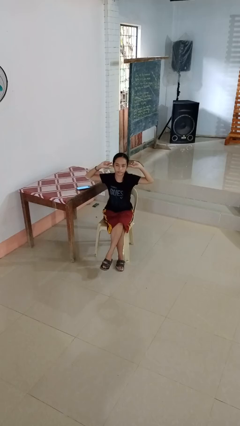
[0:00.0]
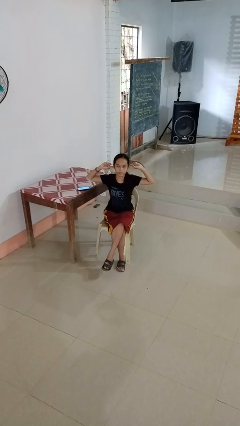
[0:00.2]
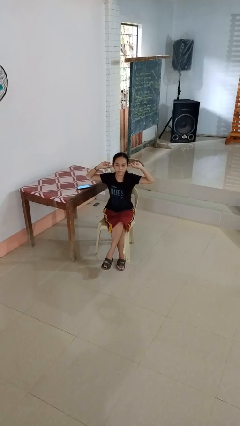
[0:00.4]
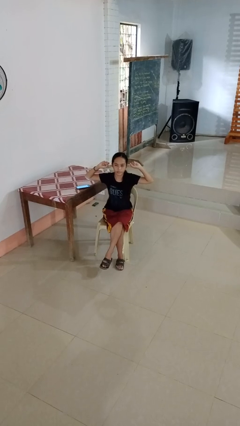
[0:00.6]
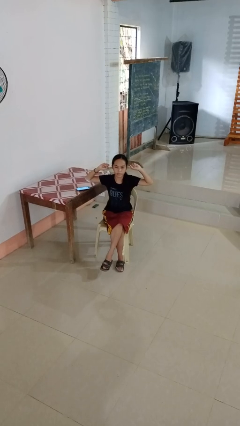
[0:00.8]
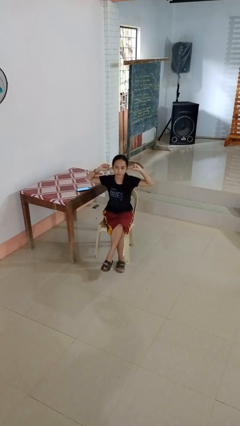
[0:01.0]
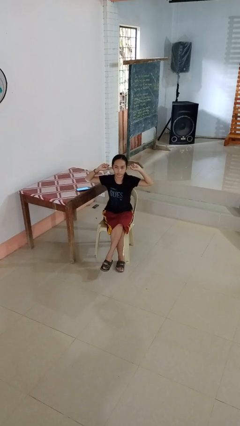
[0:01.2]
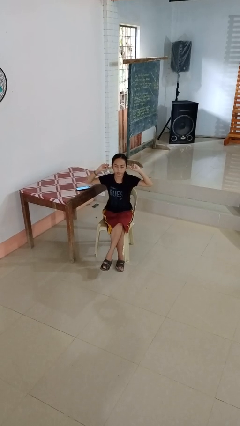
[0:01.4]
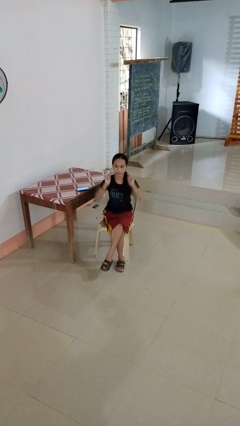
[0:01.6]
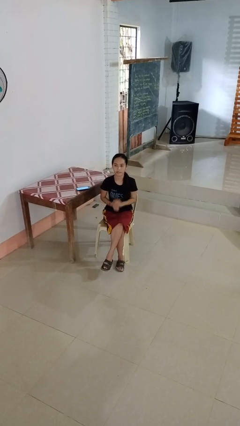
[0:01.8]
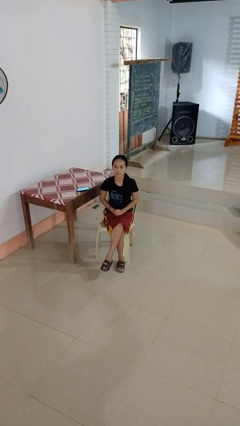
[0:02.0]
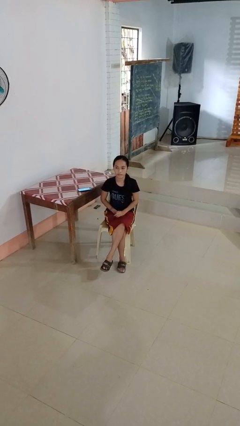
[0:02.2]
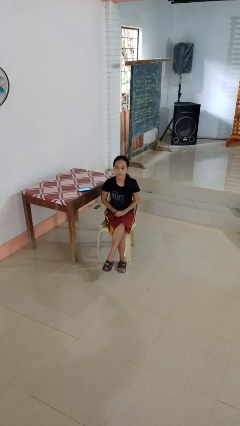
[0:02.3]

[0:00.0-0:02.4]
person puts fingers in ear

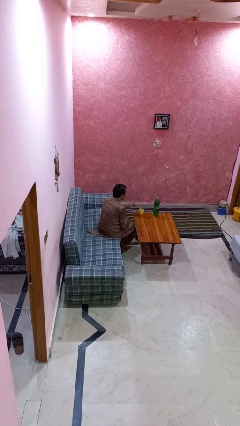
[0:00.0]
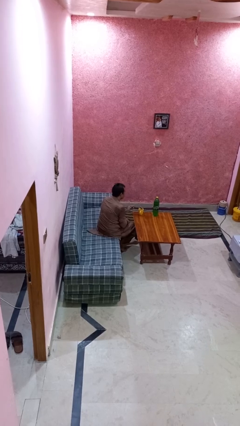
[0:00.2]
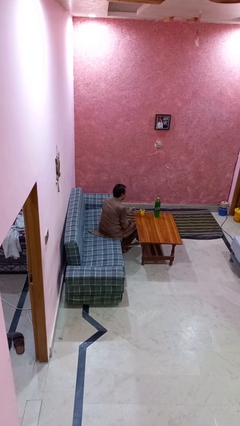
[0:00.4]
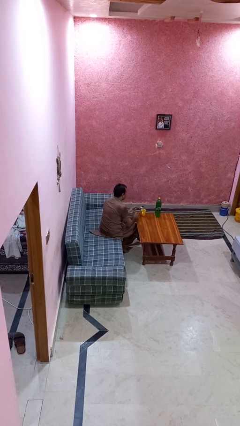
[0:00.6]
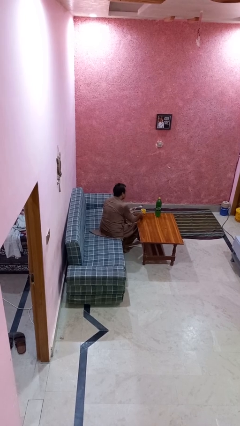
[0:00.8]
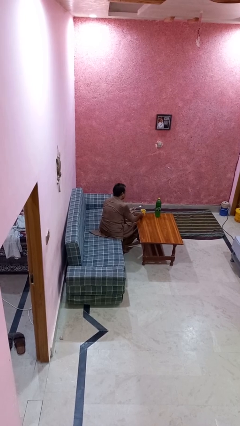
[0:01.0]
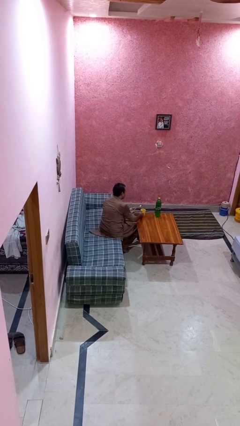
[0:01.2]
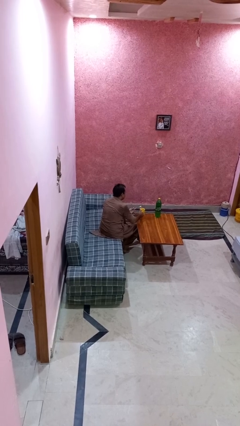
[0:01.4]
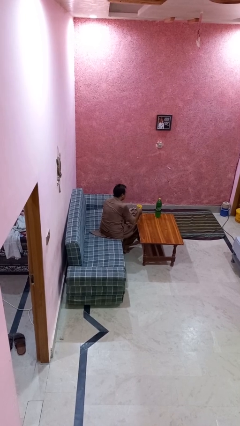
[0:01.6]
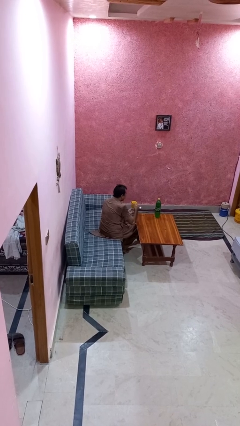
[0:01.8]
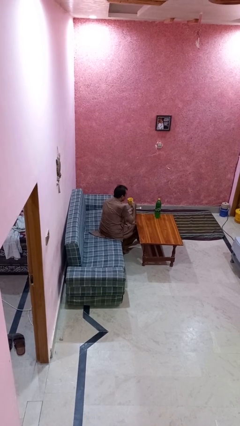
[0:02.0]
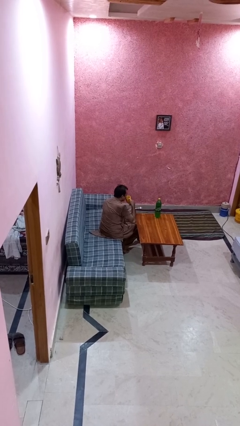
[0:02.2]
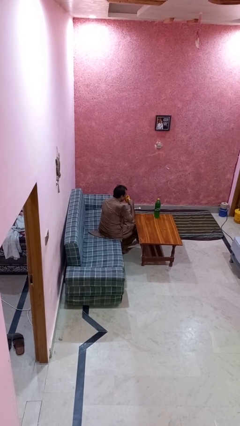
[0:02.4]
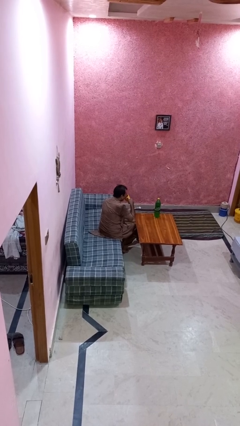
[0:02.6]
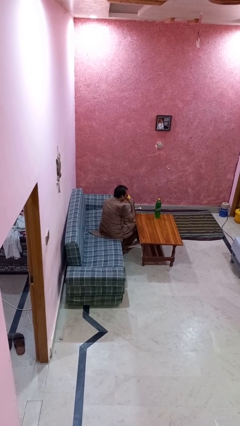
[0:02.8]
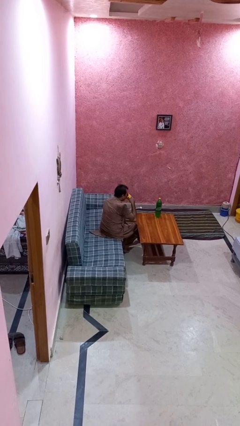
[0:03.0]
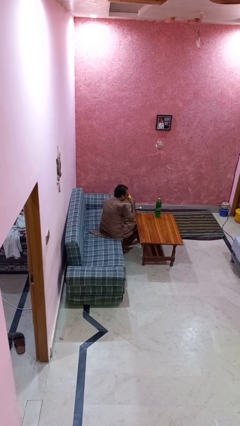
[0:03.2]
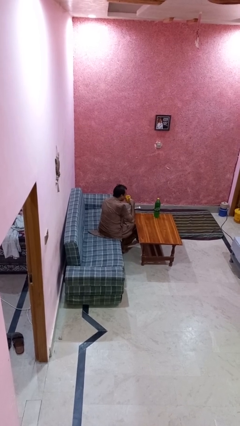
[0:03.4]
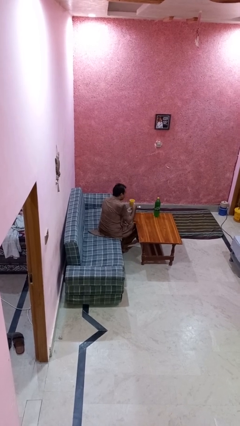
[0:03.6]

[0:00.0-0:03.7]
person drinks from mug

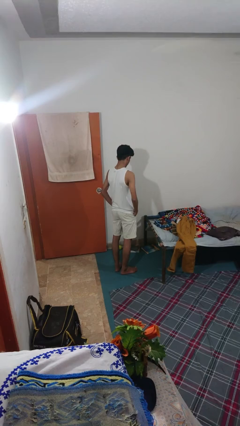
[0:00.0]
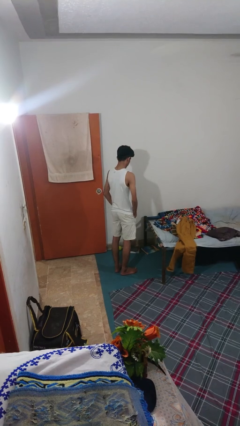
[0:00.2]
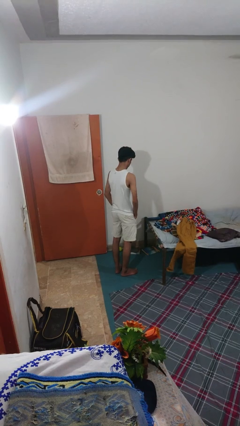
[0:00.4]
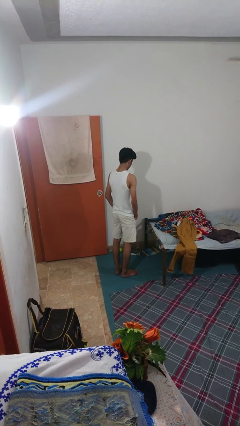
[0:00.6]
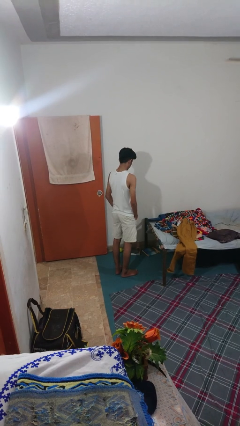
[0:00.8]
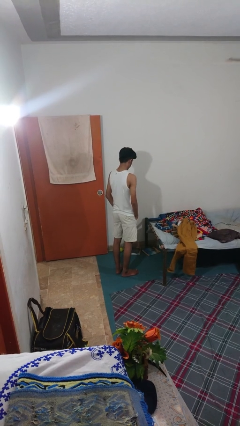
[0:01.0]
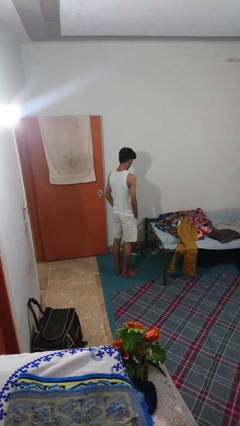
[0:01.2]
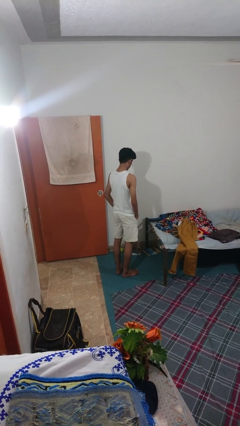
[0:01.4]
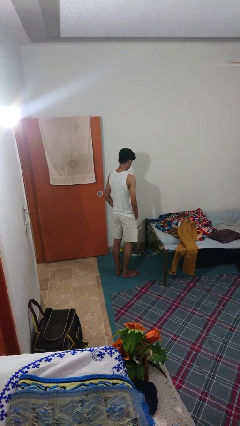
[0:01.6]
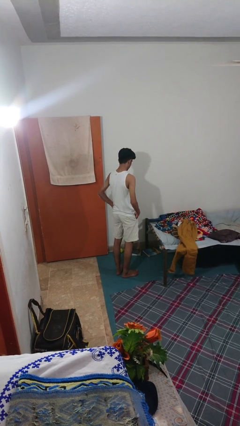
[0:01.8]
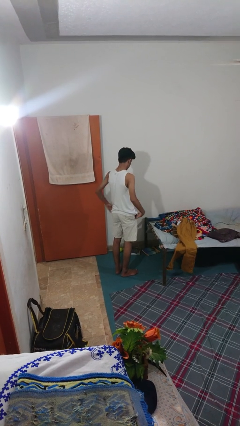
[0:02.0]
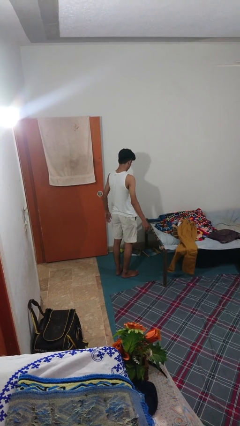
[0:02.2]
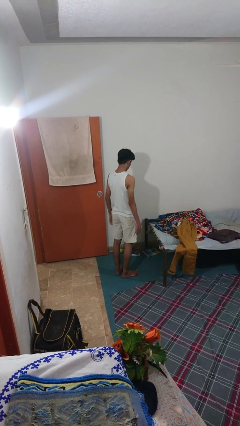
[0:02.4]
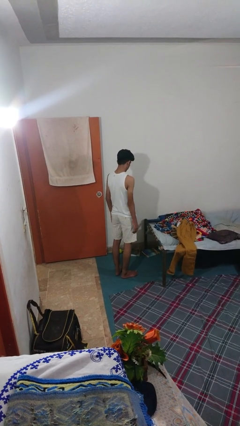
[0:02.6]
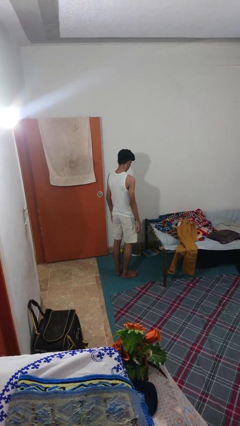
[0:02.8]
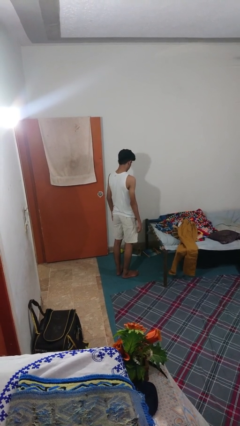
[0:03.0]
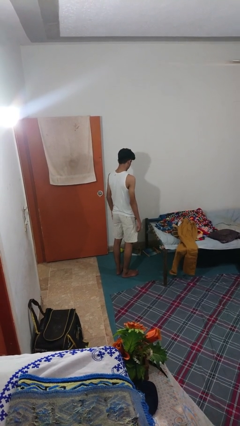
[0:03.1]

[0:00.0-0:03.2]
person puts hands in back pockets

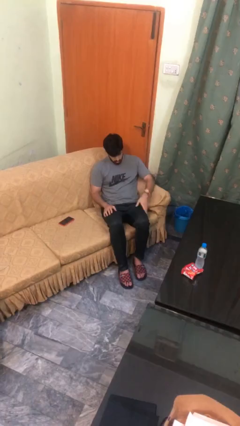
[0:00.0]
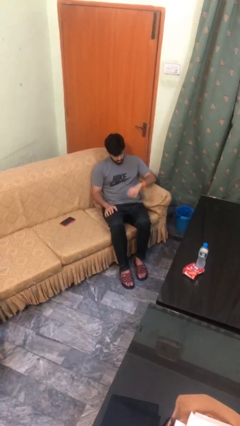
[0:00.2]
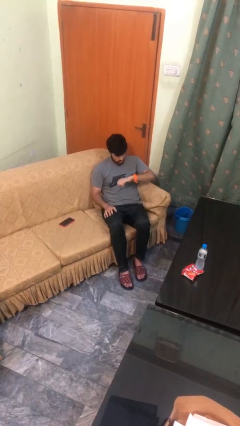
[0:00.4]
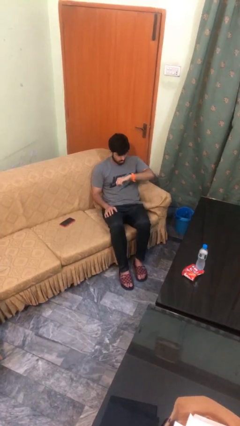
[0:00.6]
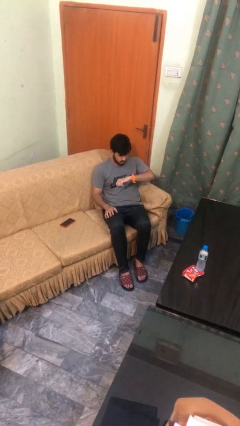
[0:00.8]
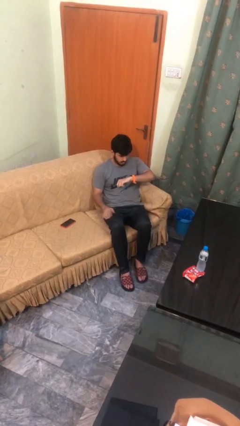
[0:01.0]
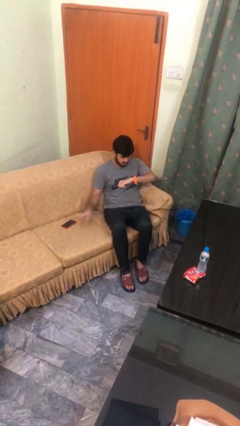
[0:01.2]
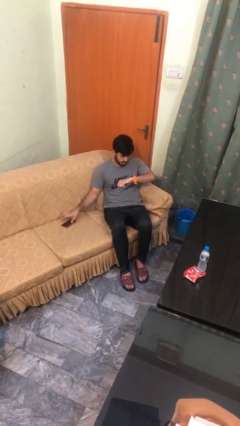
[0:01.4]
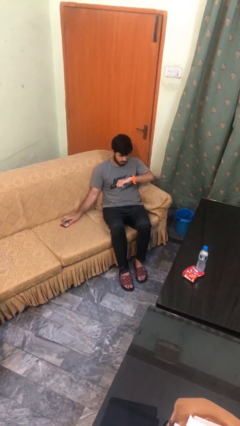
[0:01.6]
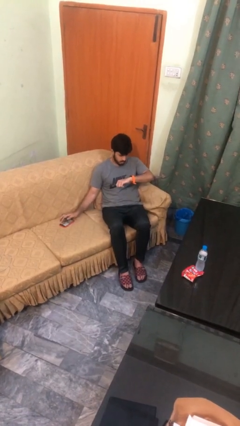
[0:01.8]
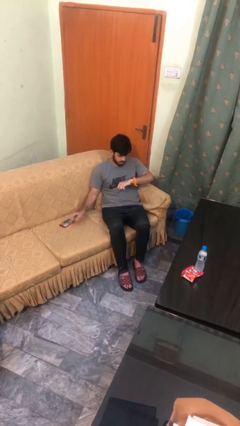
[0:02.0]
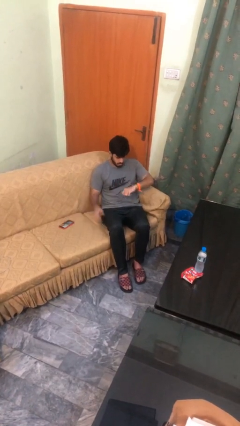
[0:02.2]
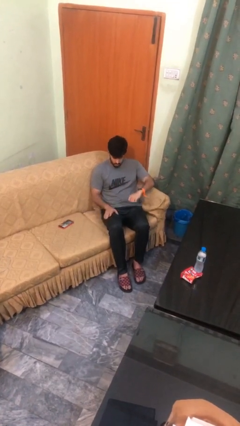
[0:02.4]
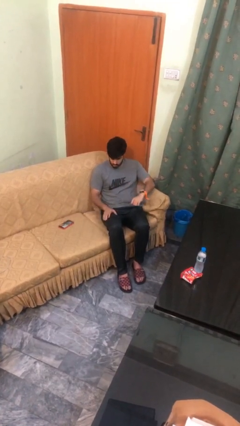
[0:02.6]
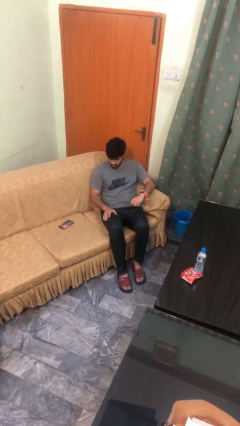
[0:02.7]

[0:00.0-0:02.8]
person looks at wristwatch

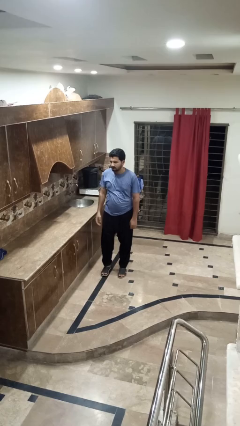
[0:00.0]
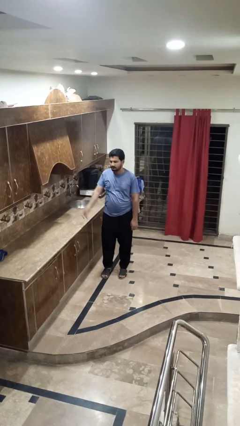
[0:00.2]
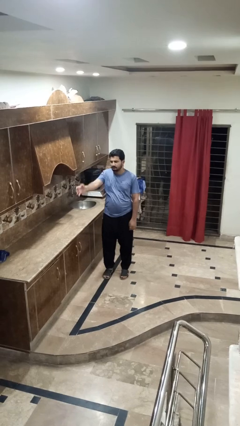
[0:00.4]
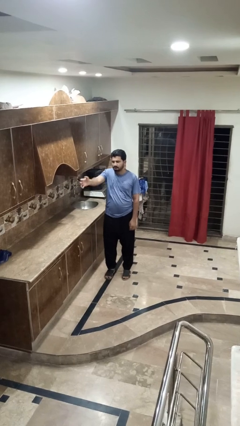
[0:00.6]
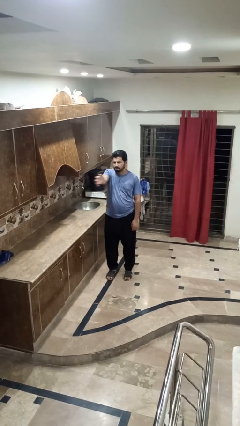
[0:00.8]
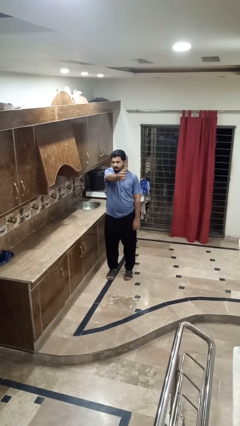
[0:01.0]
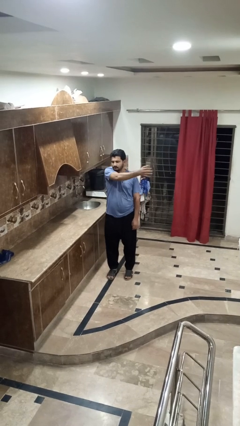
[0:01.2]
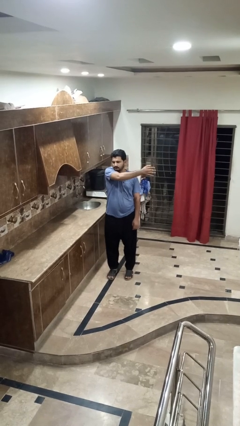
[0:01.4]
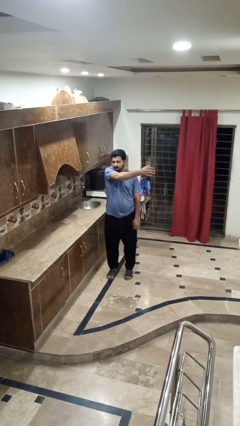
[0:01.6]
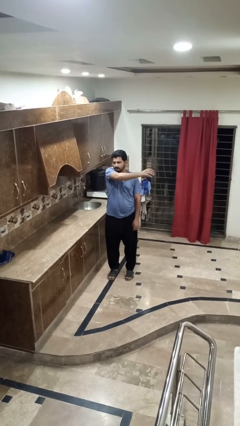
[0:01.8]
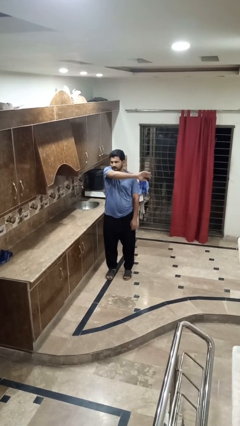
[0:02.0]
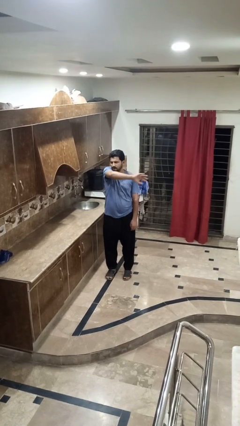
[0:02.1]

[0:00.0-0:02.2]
person gestures swipe left

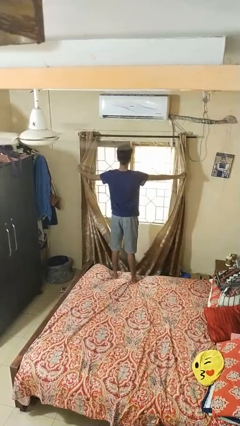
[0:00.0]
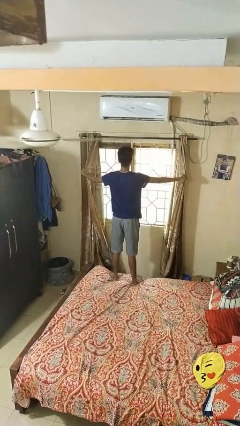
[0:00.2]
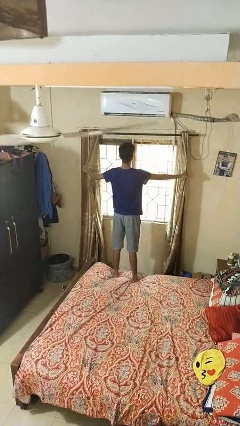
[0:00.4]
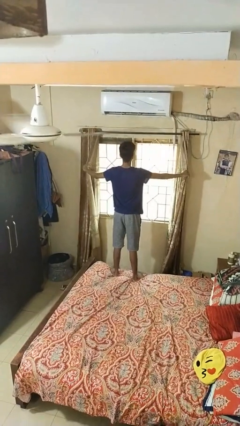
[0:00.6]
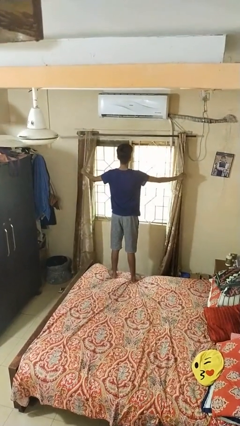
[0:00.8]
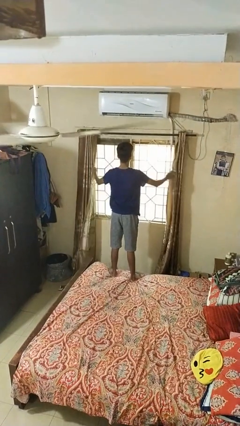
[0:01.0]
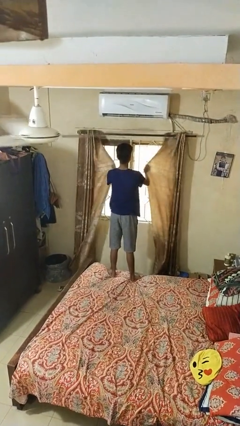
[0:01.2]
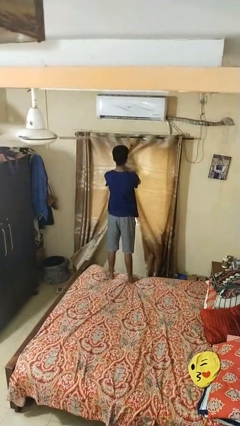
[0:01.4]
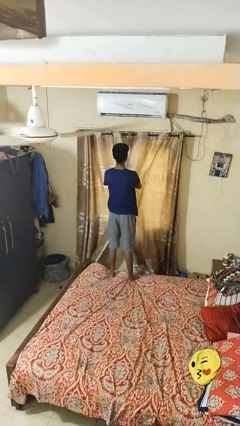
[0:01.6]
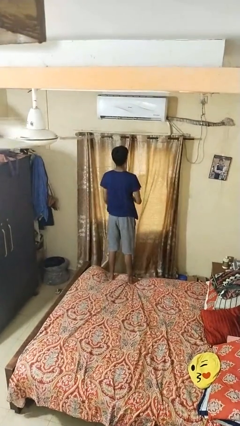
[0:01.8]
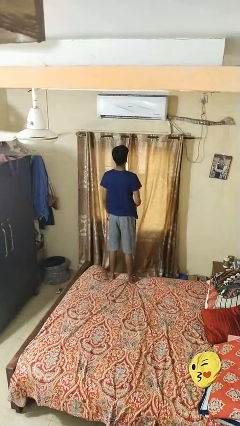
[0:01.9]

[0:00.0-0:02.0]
person closes curtains

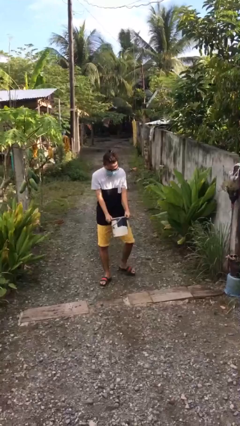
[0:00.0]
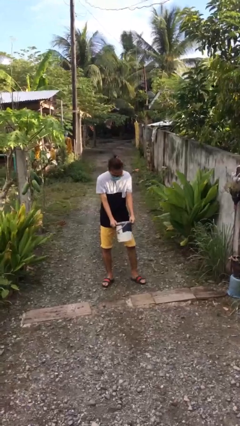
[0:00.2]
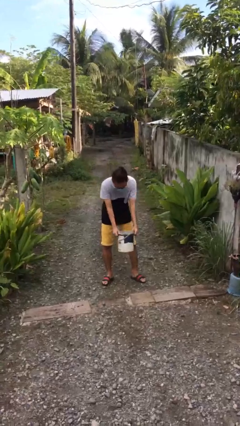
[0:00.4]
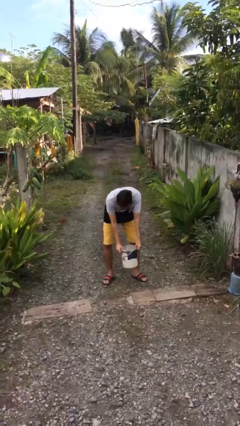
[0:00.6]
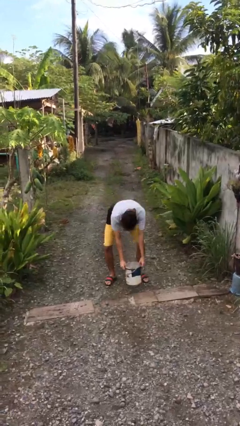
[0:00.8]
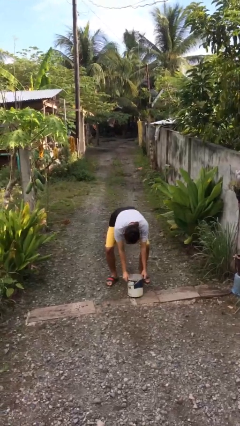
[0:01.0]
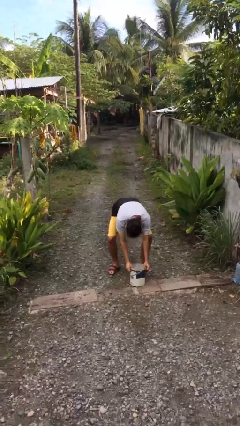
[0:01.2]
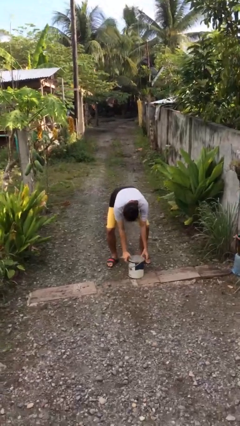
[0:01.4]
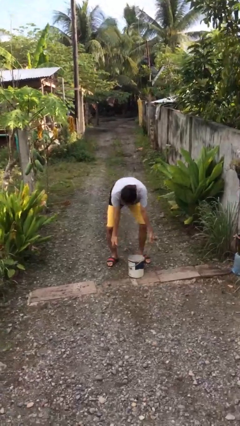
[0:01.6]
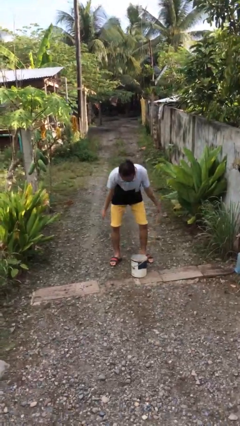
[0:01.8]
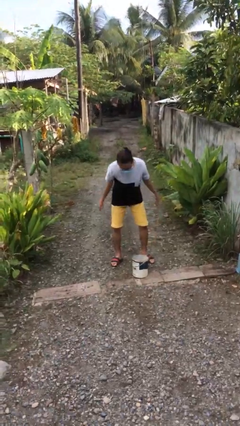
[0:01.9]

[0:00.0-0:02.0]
person puts down object on floor
